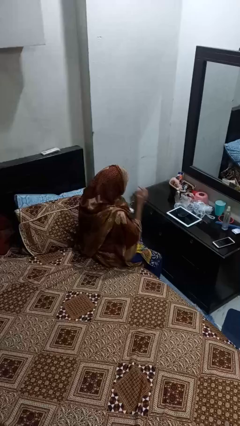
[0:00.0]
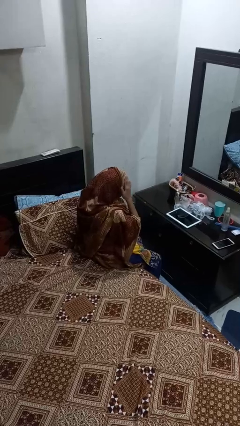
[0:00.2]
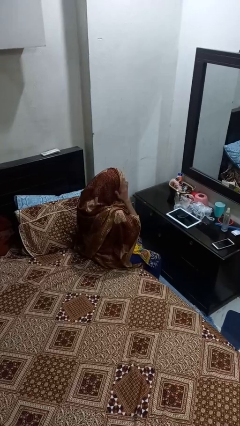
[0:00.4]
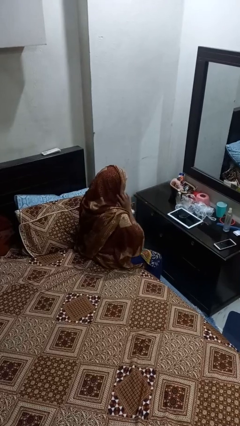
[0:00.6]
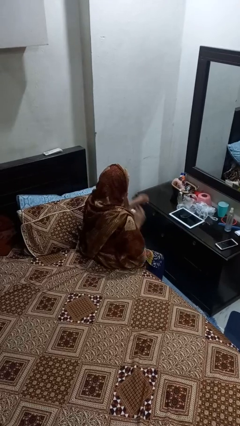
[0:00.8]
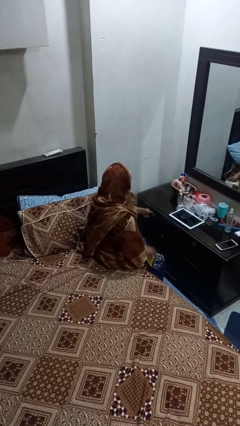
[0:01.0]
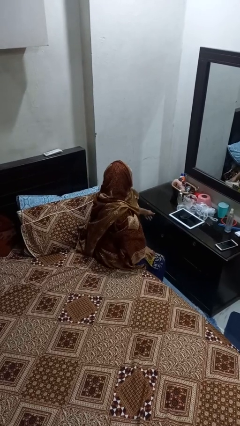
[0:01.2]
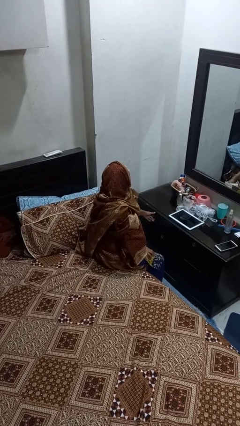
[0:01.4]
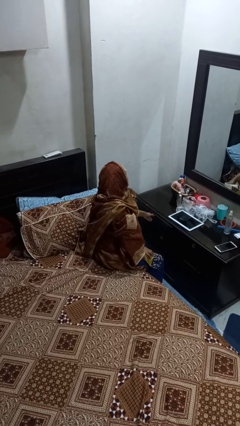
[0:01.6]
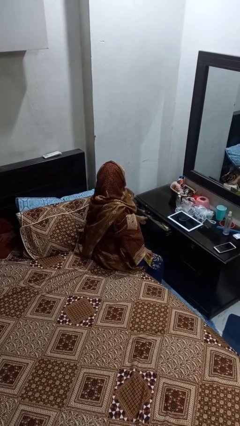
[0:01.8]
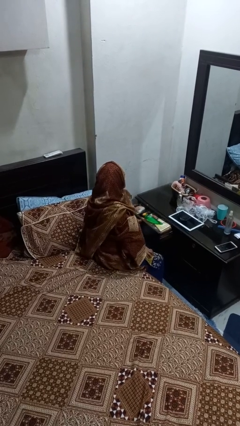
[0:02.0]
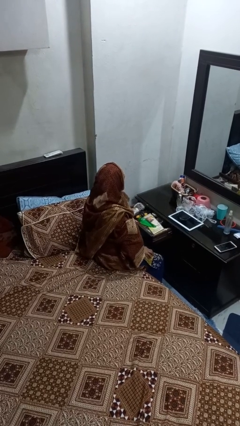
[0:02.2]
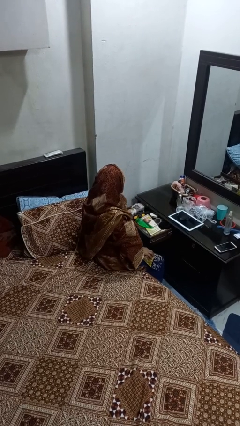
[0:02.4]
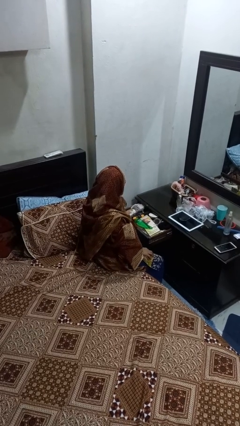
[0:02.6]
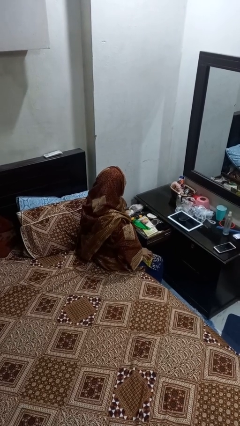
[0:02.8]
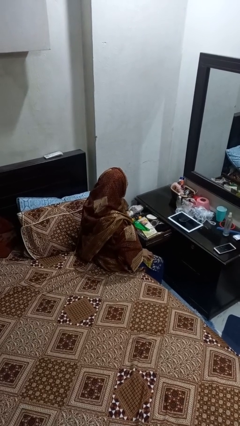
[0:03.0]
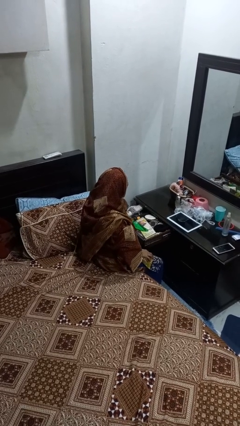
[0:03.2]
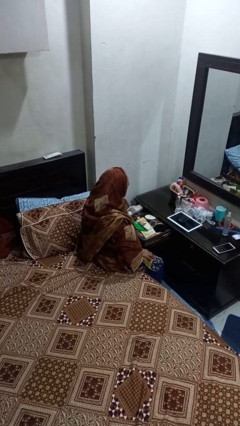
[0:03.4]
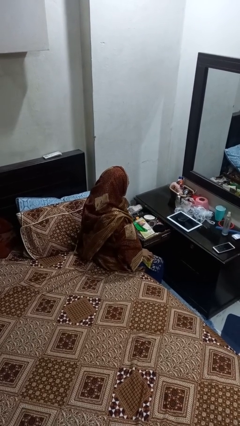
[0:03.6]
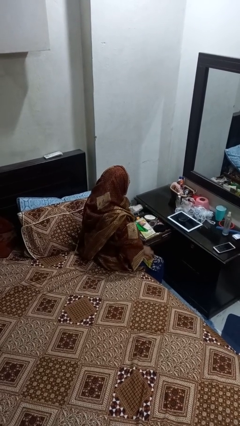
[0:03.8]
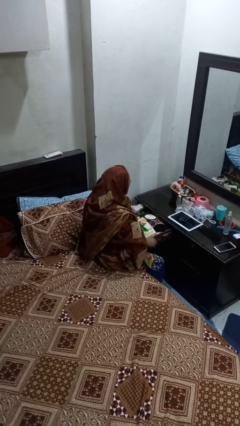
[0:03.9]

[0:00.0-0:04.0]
person opens dresser drawer

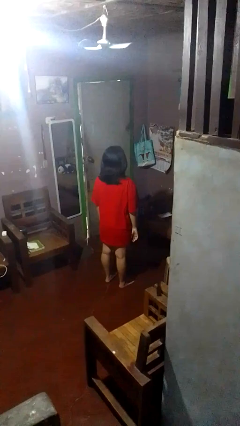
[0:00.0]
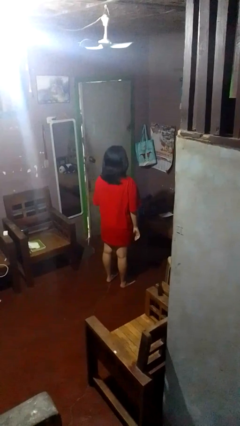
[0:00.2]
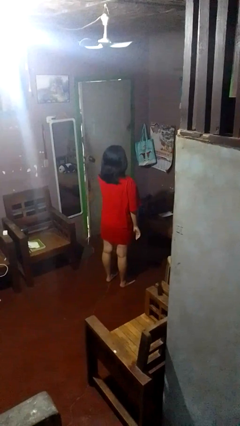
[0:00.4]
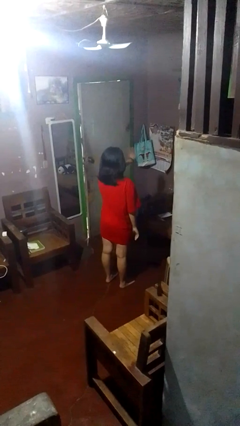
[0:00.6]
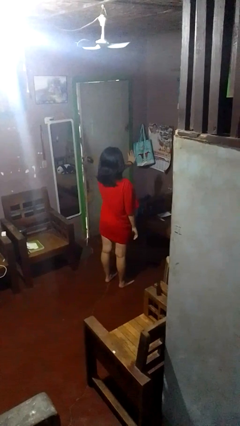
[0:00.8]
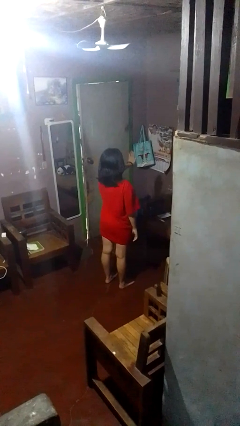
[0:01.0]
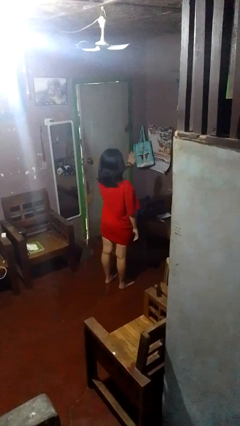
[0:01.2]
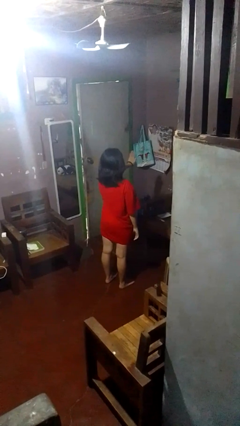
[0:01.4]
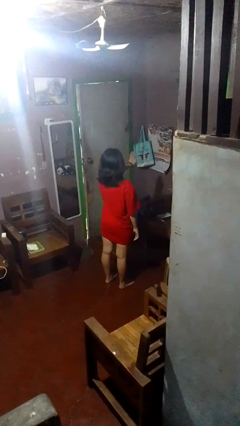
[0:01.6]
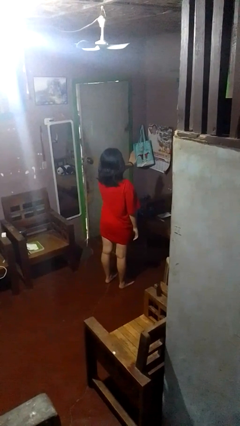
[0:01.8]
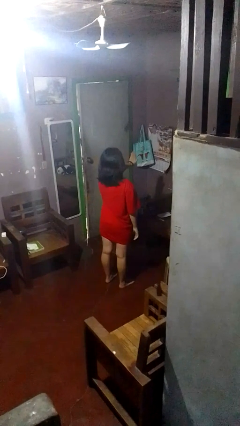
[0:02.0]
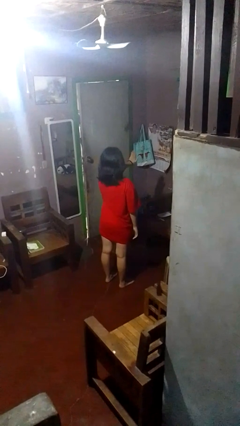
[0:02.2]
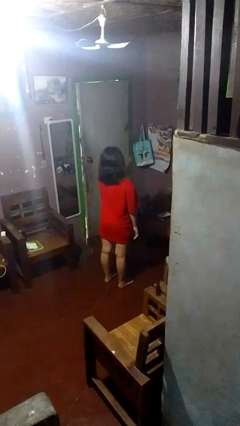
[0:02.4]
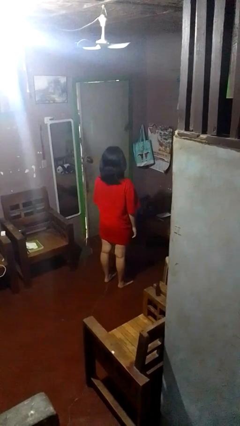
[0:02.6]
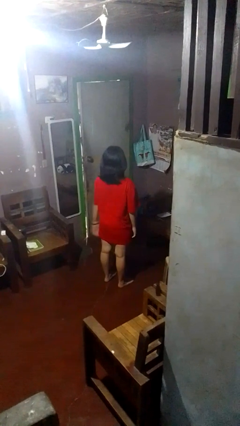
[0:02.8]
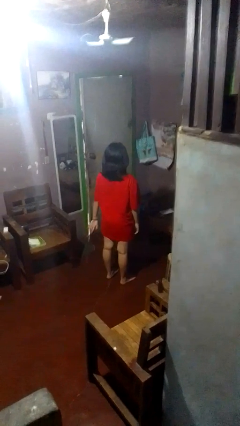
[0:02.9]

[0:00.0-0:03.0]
person gestures stop

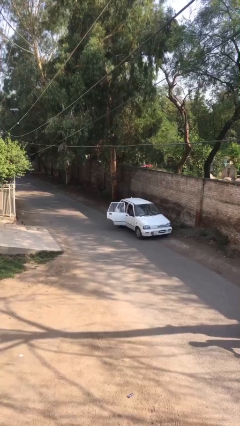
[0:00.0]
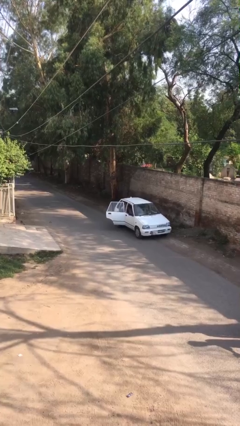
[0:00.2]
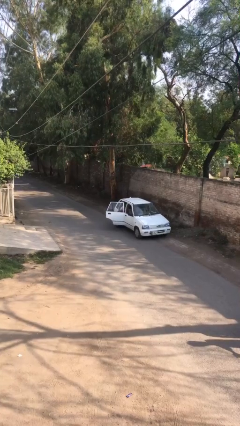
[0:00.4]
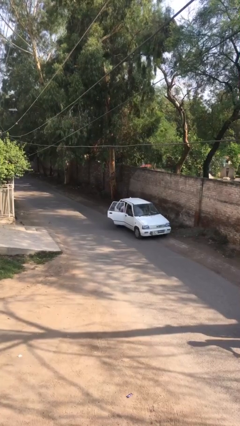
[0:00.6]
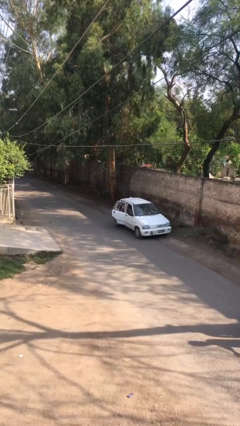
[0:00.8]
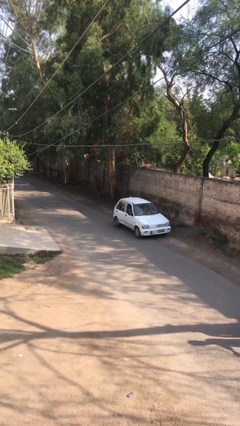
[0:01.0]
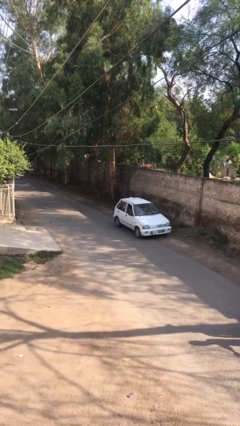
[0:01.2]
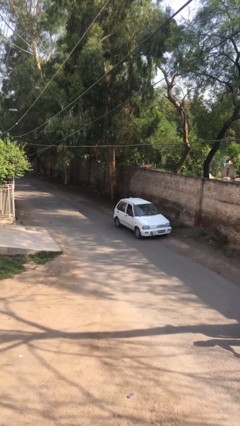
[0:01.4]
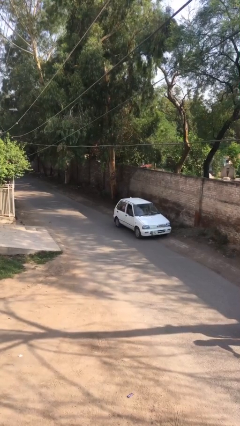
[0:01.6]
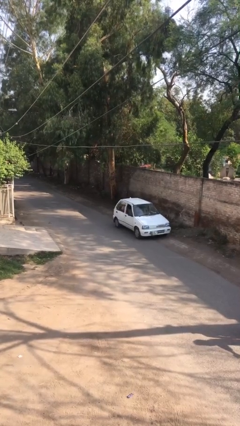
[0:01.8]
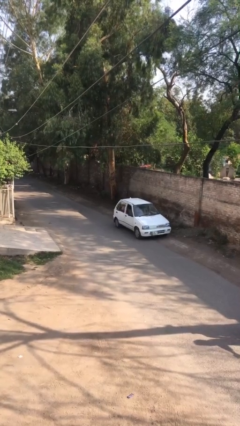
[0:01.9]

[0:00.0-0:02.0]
person closes car door

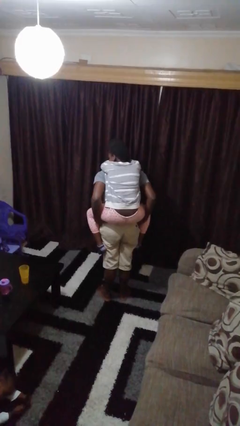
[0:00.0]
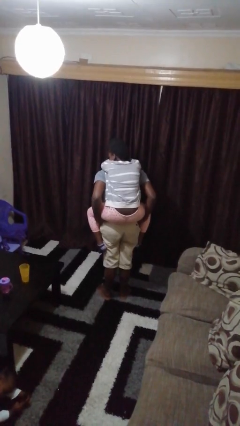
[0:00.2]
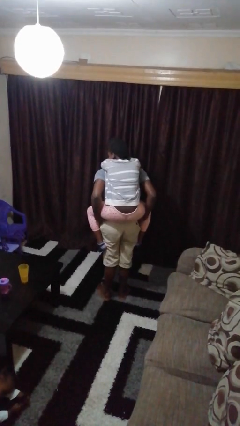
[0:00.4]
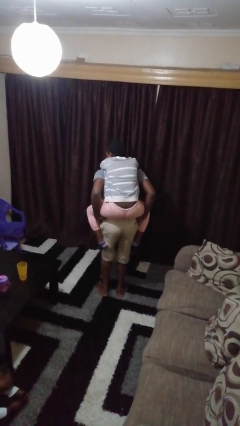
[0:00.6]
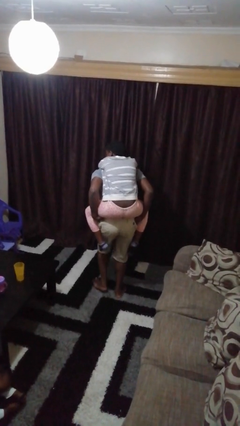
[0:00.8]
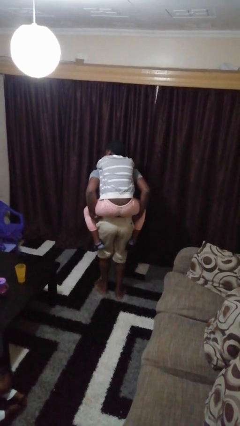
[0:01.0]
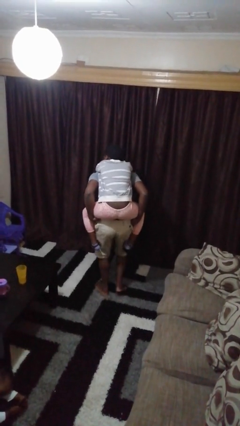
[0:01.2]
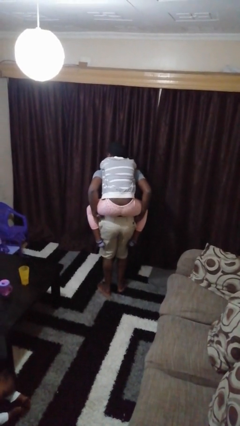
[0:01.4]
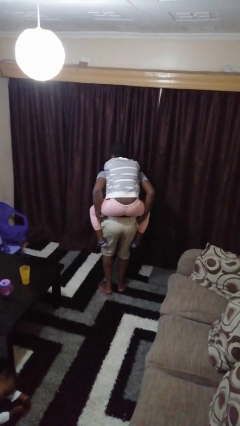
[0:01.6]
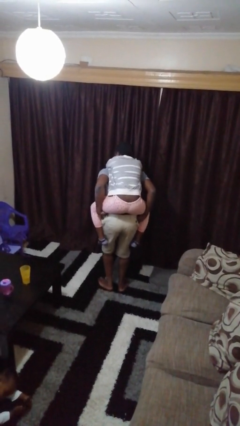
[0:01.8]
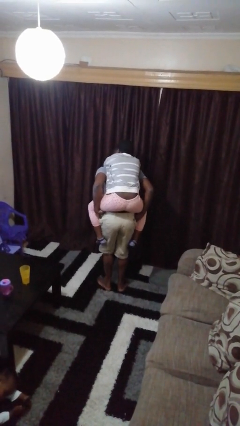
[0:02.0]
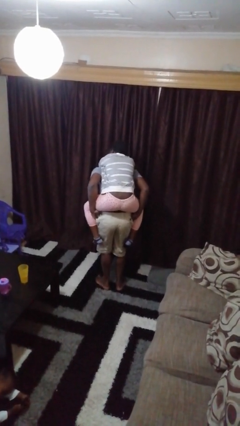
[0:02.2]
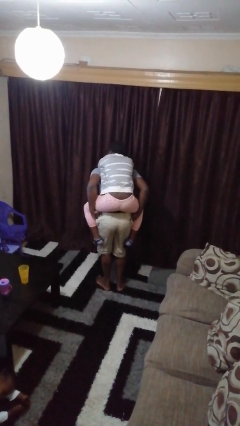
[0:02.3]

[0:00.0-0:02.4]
person carries person on back

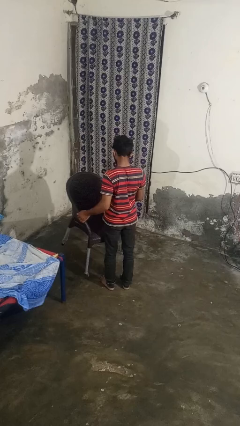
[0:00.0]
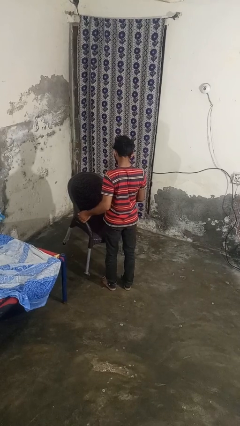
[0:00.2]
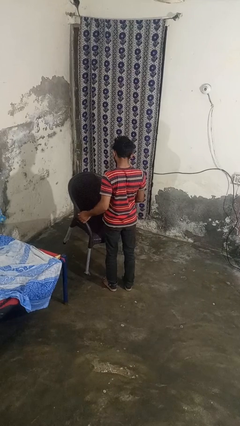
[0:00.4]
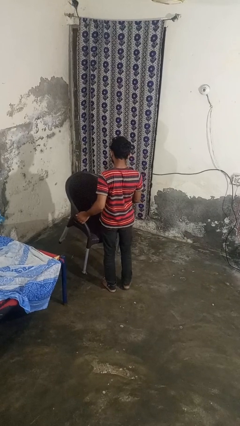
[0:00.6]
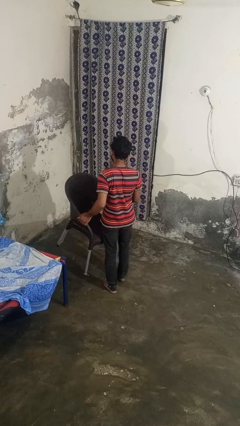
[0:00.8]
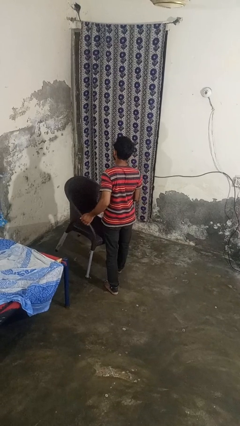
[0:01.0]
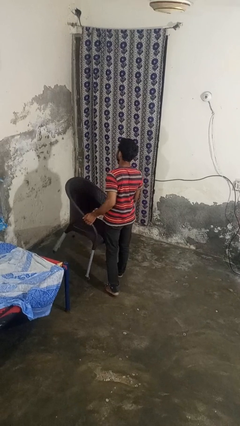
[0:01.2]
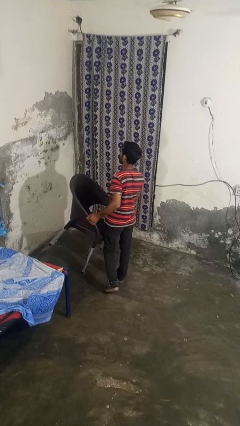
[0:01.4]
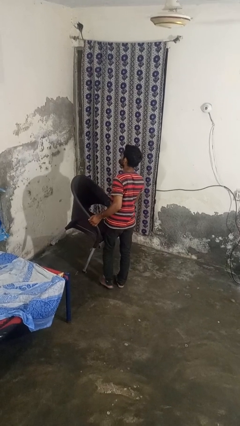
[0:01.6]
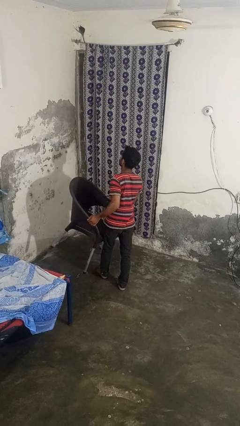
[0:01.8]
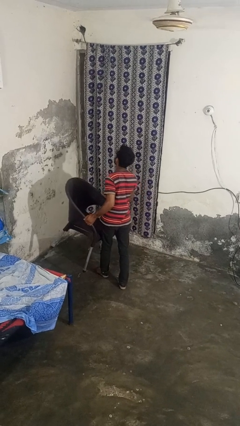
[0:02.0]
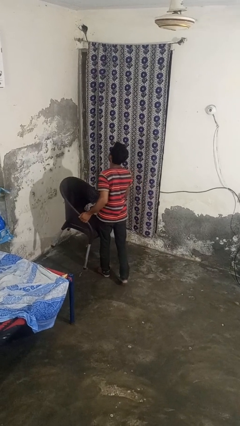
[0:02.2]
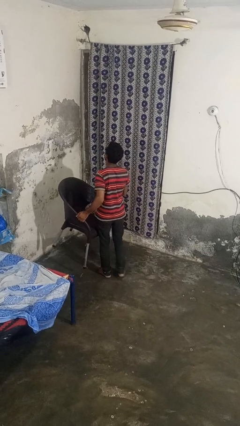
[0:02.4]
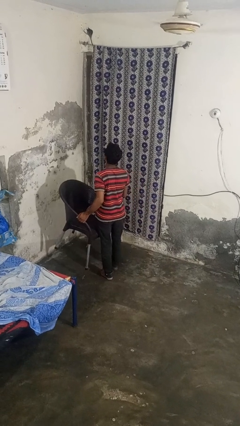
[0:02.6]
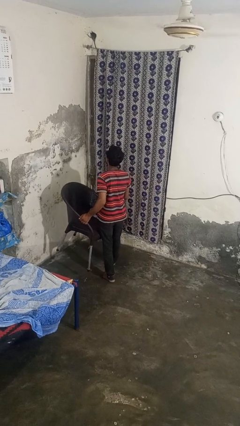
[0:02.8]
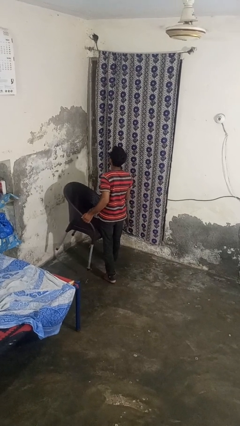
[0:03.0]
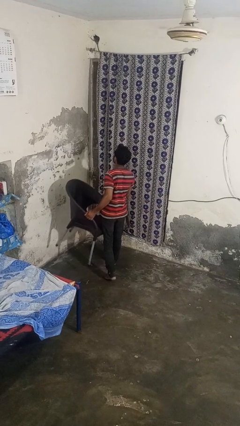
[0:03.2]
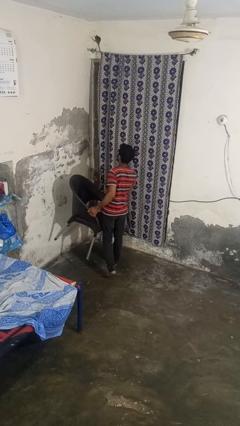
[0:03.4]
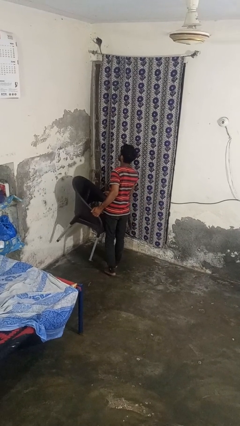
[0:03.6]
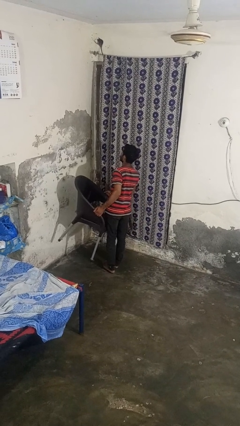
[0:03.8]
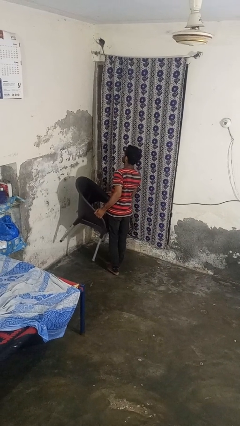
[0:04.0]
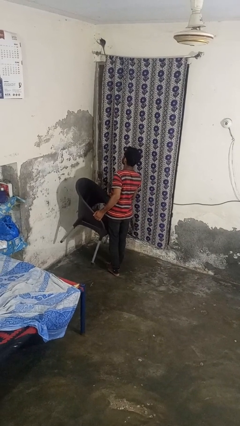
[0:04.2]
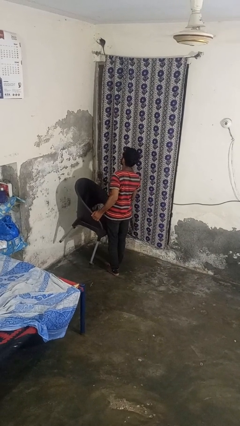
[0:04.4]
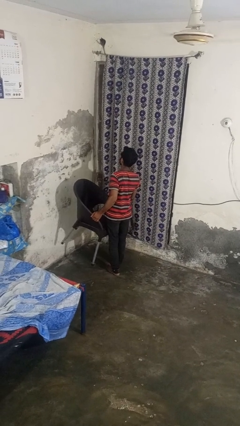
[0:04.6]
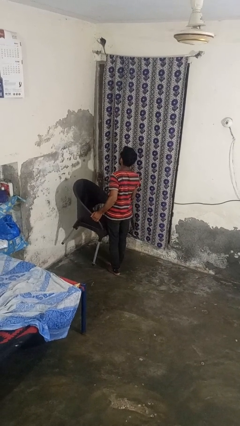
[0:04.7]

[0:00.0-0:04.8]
person carries furniture

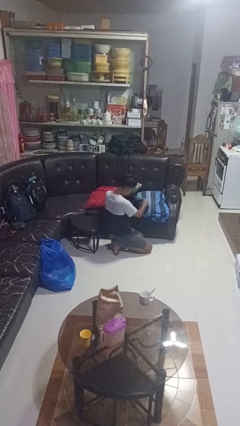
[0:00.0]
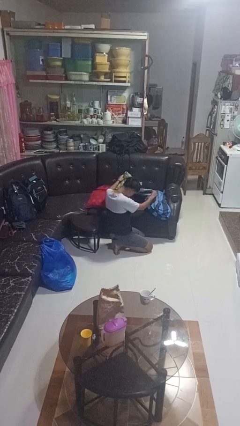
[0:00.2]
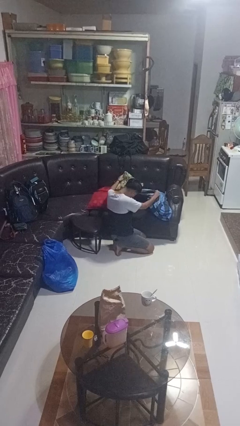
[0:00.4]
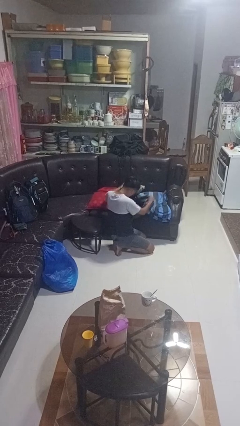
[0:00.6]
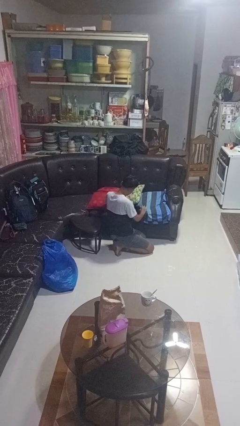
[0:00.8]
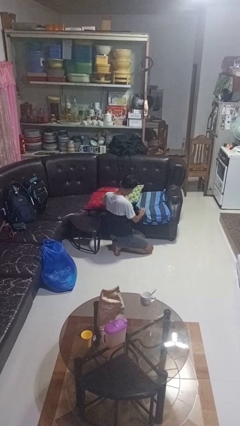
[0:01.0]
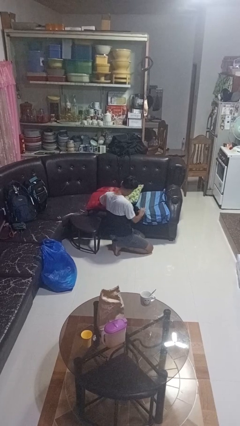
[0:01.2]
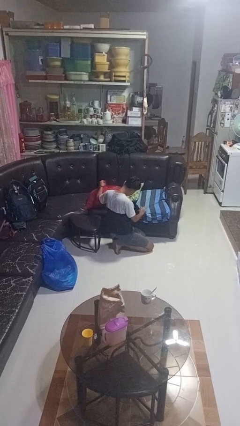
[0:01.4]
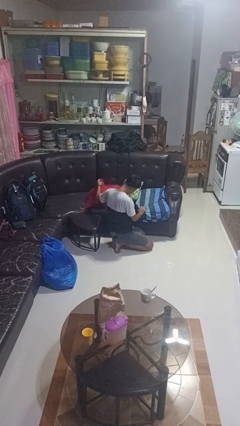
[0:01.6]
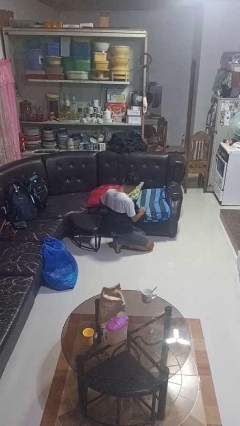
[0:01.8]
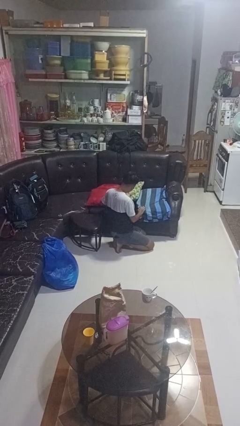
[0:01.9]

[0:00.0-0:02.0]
person searches in couch
